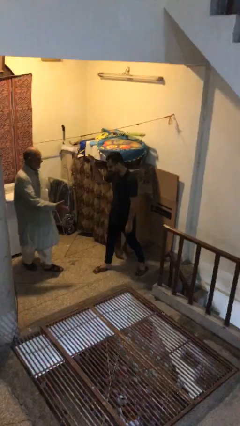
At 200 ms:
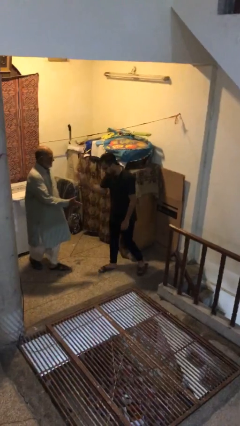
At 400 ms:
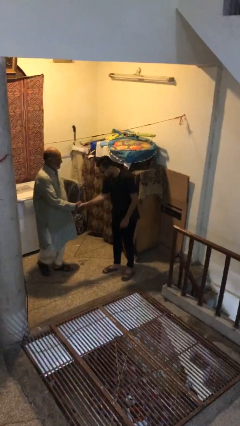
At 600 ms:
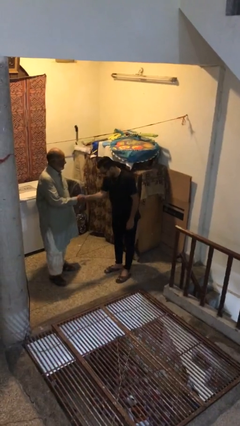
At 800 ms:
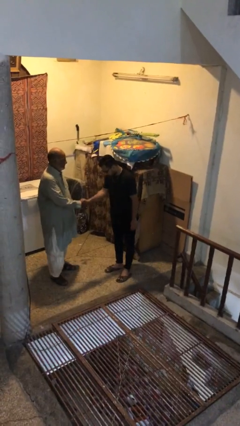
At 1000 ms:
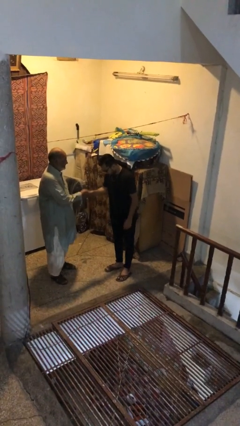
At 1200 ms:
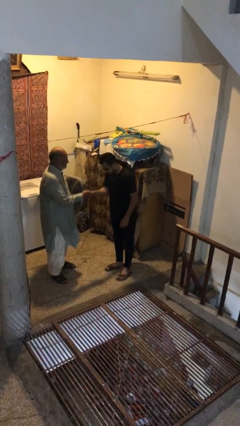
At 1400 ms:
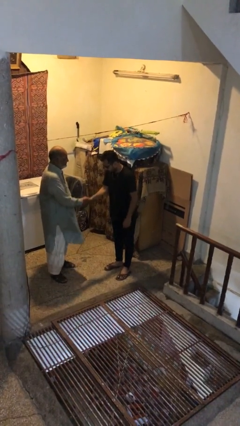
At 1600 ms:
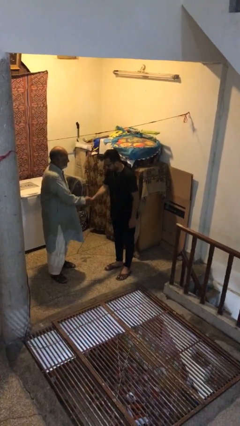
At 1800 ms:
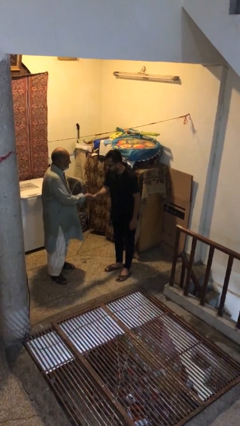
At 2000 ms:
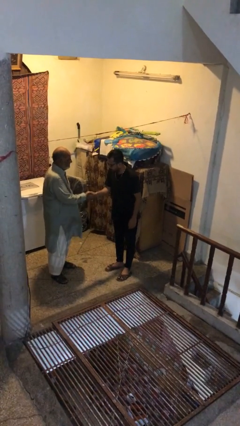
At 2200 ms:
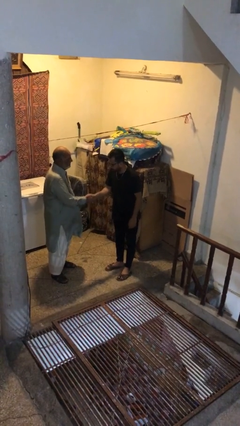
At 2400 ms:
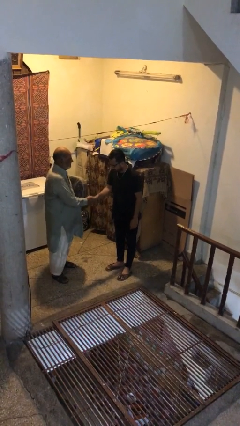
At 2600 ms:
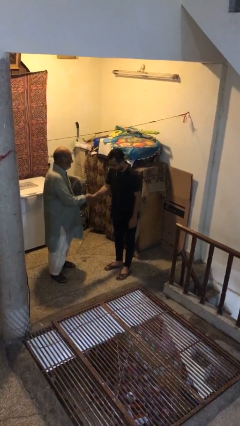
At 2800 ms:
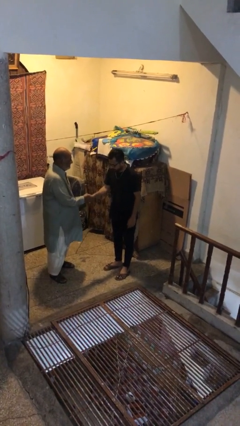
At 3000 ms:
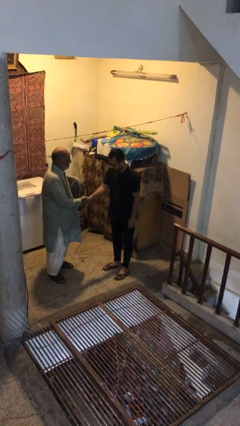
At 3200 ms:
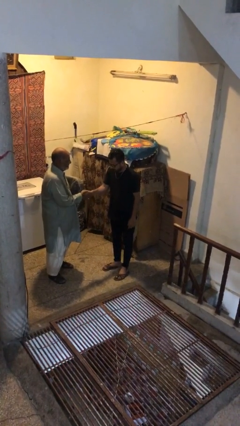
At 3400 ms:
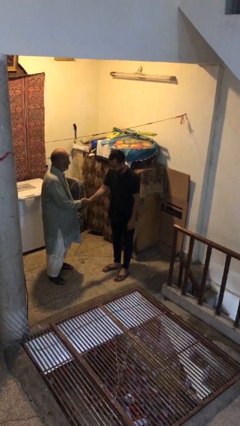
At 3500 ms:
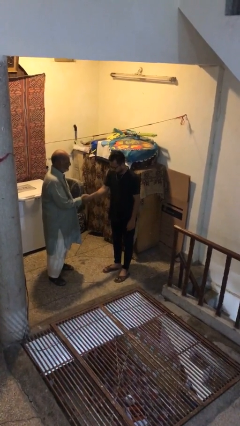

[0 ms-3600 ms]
person shakes hand

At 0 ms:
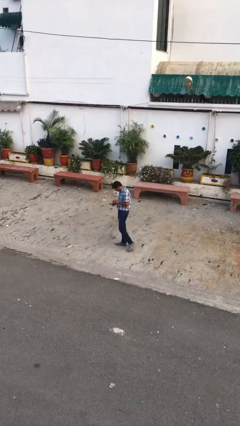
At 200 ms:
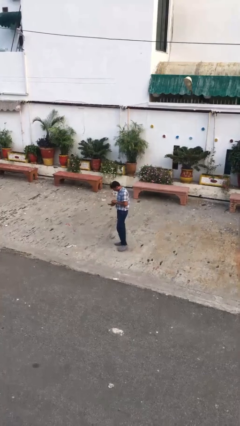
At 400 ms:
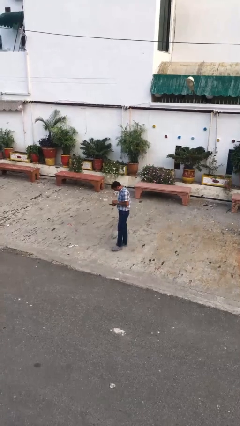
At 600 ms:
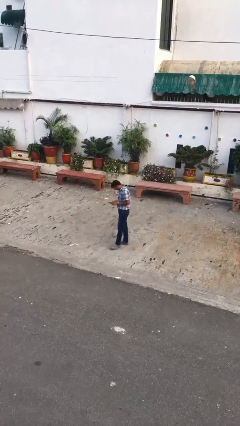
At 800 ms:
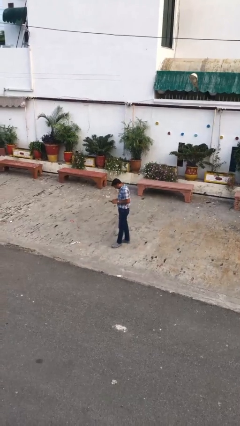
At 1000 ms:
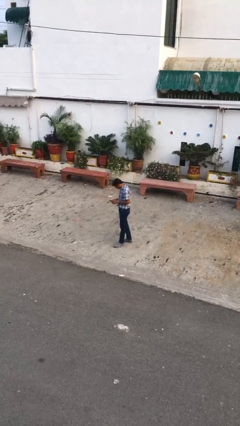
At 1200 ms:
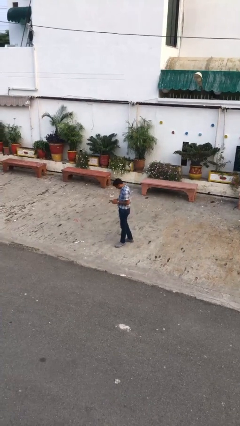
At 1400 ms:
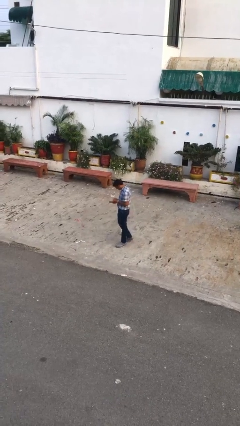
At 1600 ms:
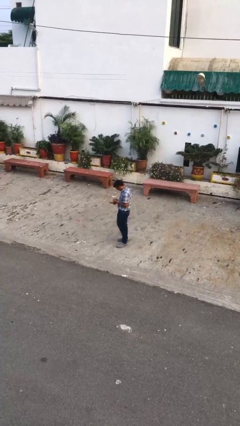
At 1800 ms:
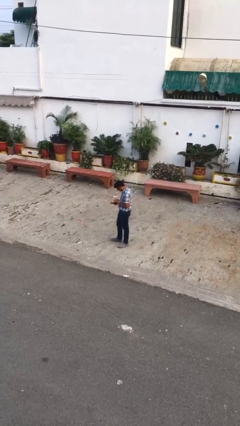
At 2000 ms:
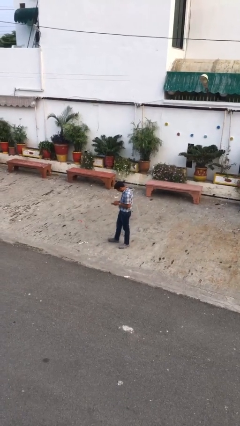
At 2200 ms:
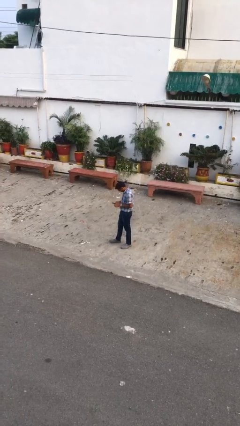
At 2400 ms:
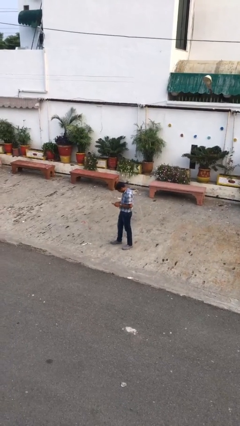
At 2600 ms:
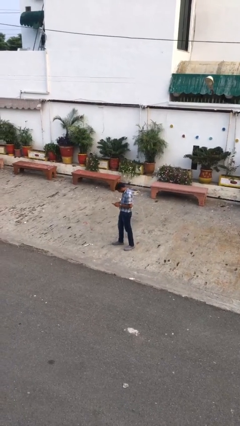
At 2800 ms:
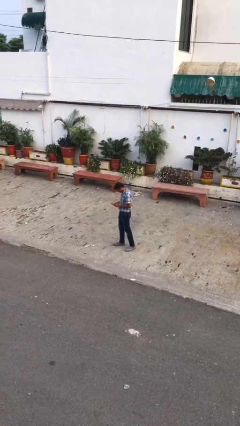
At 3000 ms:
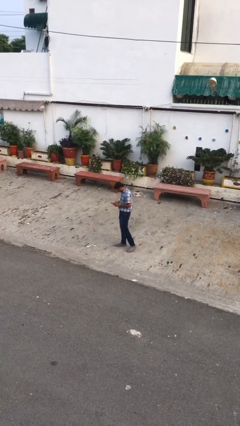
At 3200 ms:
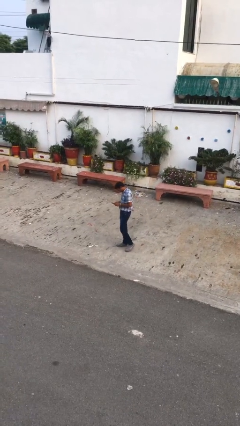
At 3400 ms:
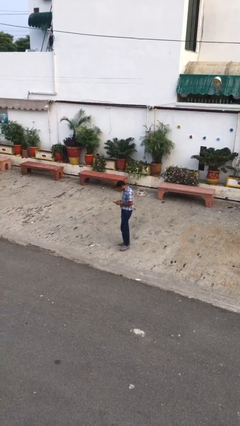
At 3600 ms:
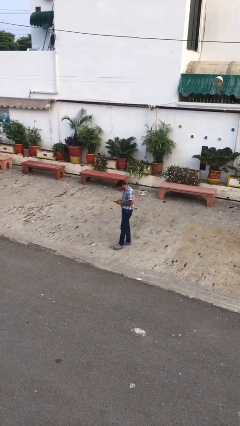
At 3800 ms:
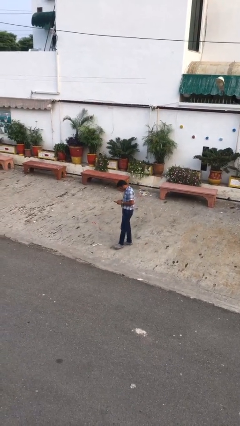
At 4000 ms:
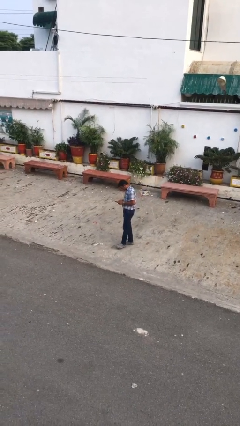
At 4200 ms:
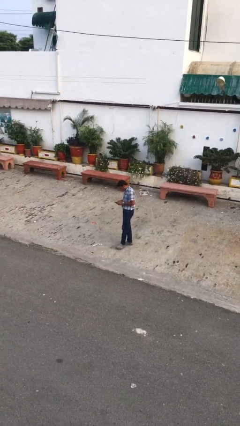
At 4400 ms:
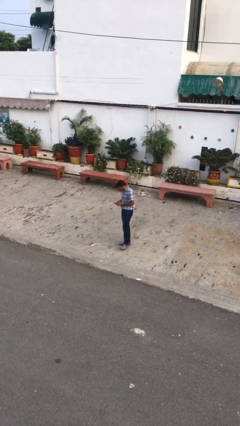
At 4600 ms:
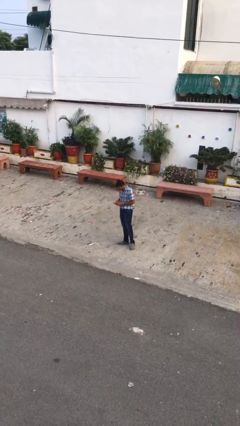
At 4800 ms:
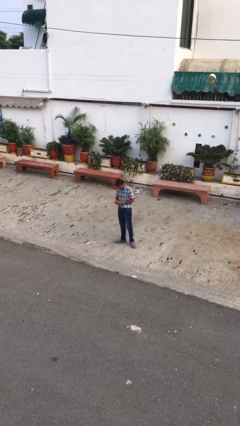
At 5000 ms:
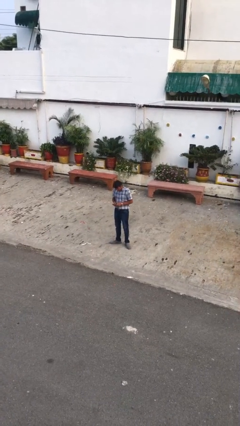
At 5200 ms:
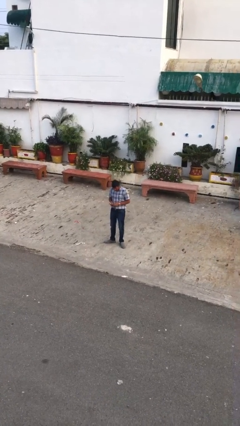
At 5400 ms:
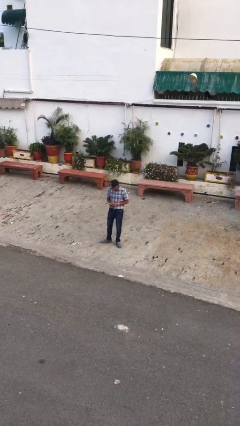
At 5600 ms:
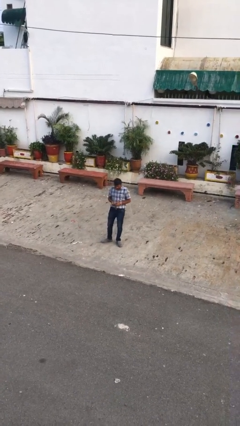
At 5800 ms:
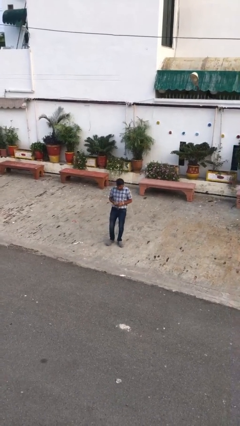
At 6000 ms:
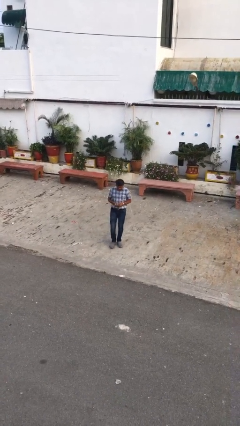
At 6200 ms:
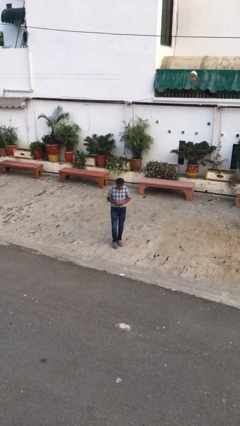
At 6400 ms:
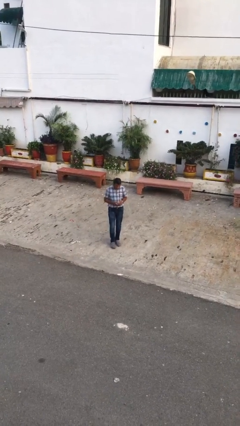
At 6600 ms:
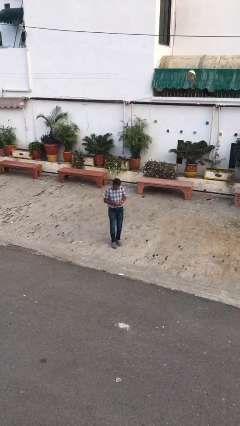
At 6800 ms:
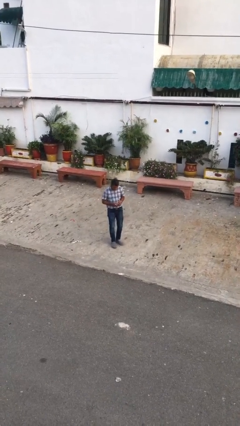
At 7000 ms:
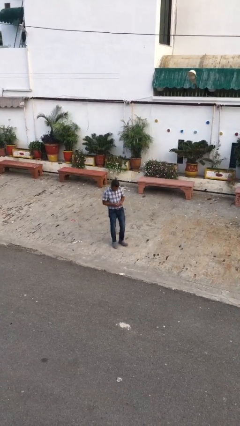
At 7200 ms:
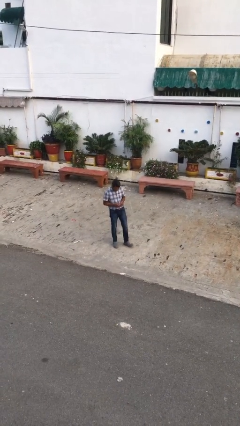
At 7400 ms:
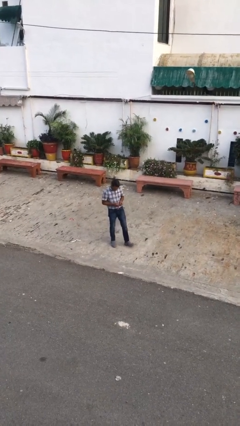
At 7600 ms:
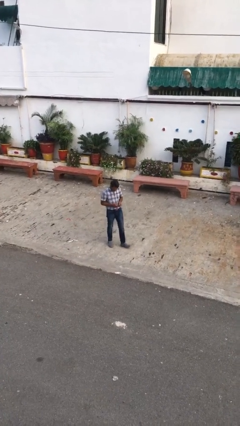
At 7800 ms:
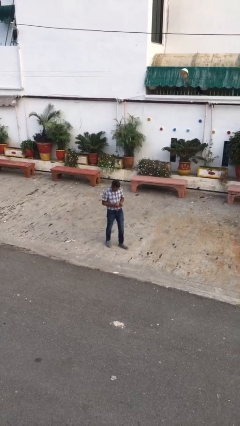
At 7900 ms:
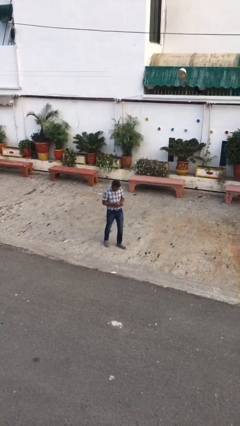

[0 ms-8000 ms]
person texts on phone

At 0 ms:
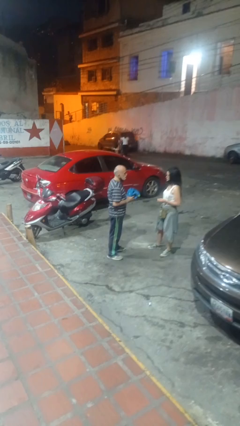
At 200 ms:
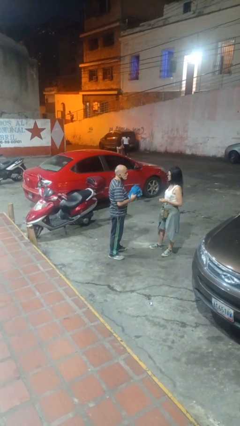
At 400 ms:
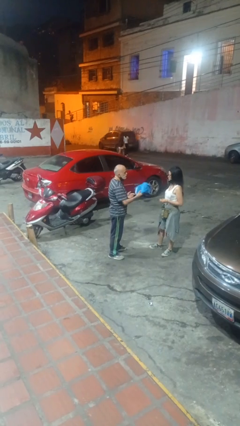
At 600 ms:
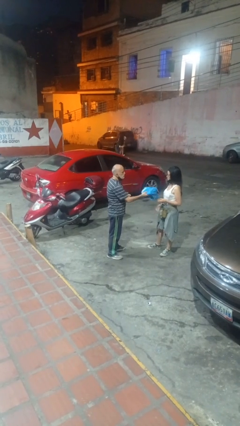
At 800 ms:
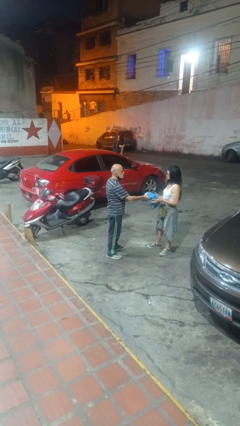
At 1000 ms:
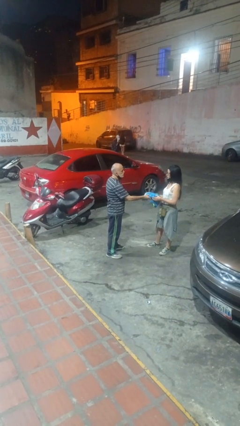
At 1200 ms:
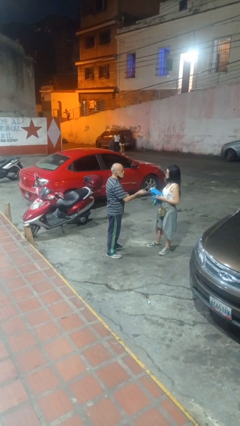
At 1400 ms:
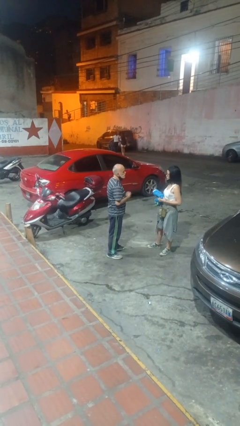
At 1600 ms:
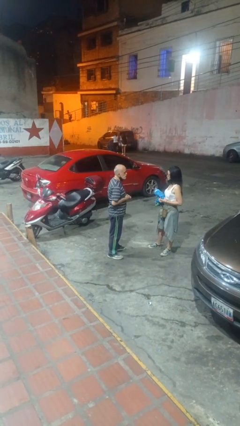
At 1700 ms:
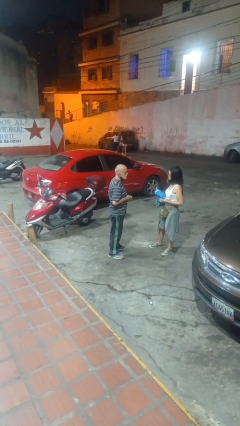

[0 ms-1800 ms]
person transfers object to person

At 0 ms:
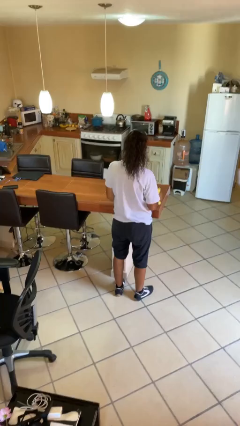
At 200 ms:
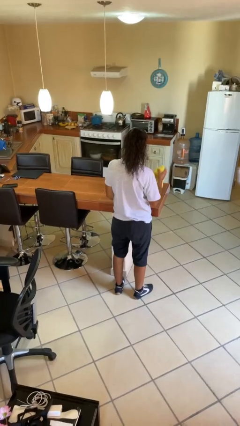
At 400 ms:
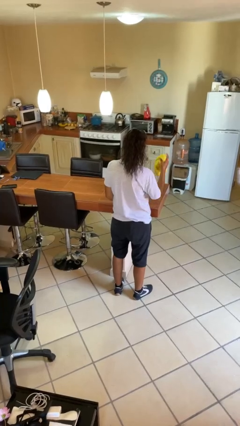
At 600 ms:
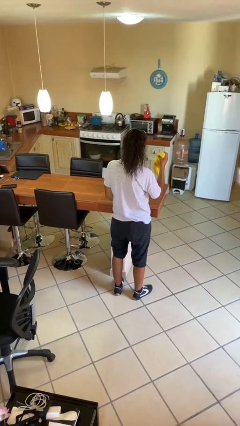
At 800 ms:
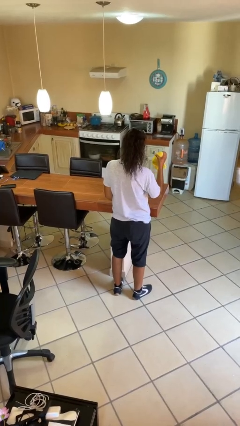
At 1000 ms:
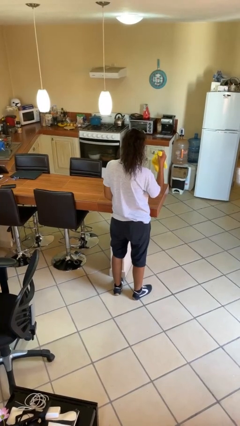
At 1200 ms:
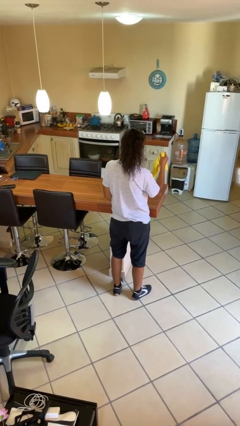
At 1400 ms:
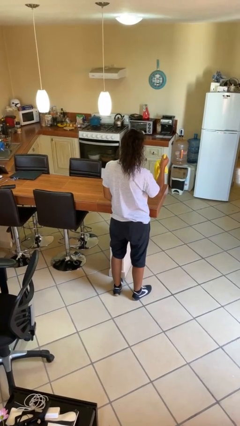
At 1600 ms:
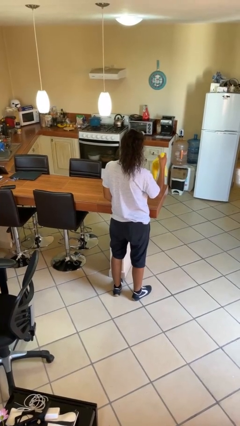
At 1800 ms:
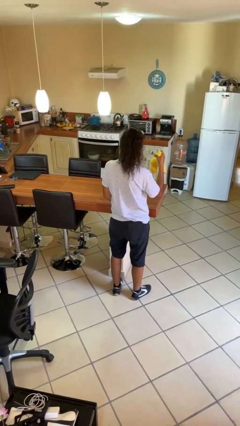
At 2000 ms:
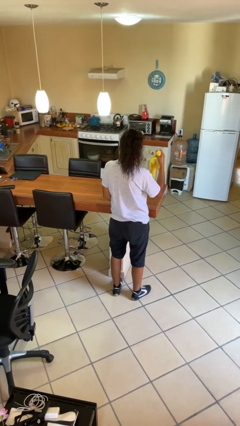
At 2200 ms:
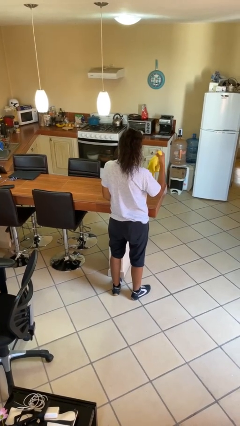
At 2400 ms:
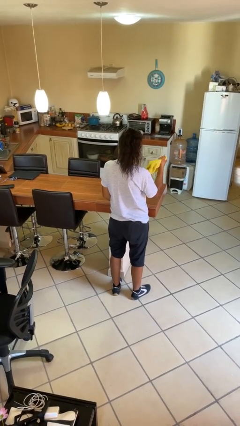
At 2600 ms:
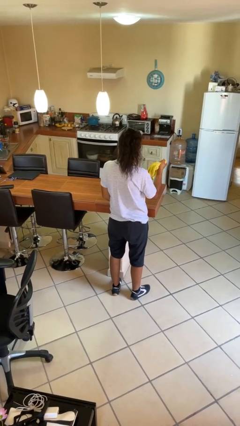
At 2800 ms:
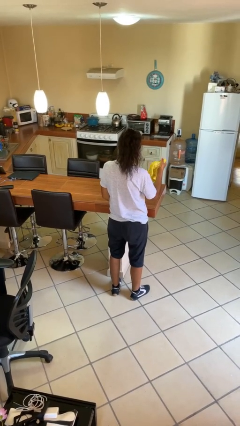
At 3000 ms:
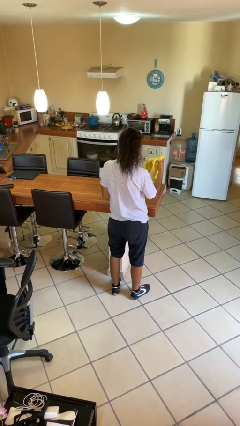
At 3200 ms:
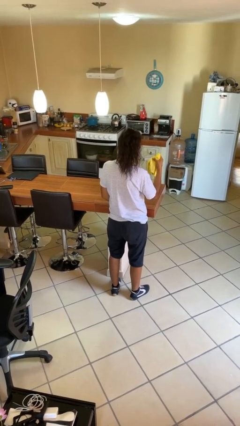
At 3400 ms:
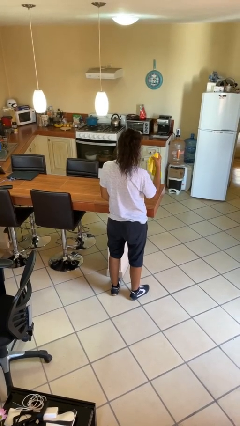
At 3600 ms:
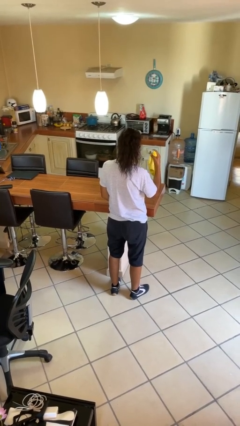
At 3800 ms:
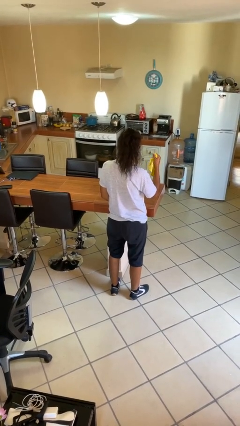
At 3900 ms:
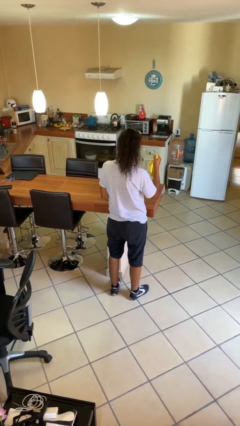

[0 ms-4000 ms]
person squeezes object

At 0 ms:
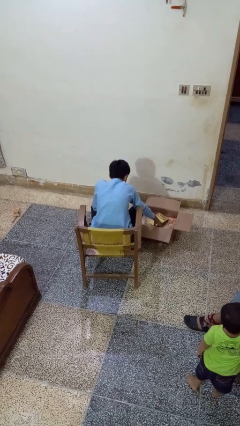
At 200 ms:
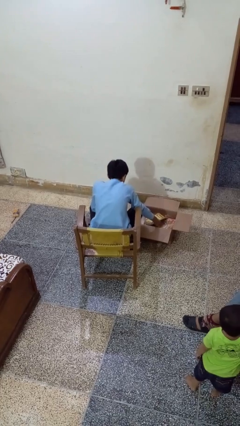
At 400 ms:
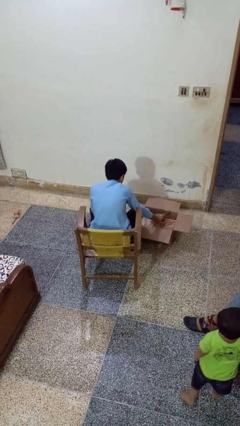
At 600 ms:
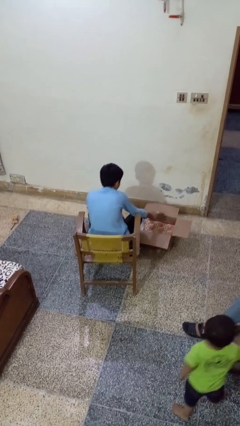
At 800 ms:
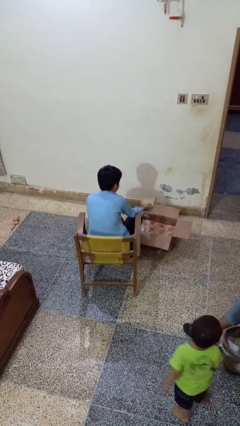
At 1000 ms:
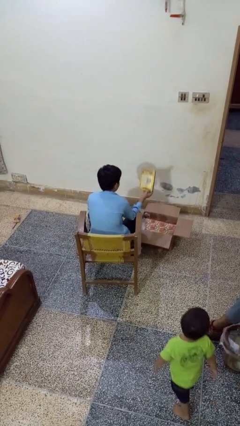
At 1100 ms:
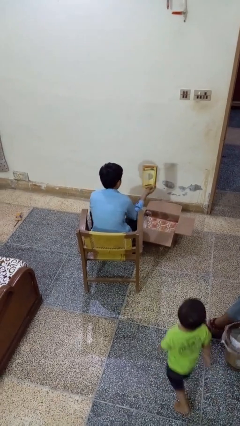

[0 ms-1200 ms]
person takes object from box
